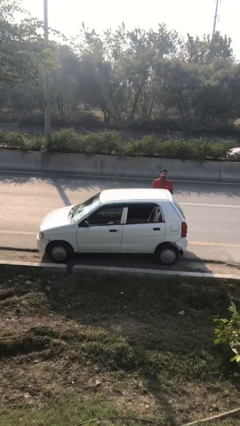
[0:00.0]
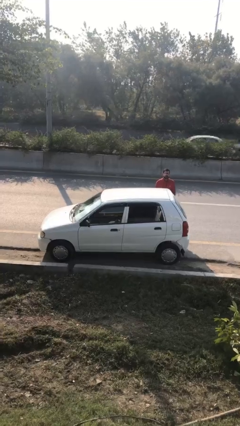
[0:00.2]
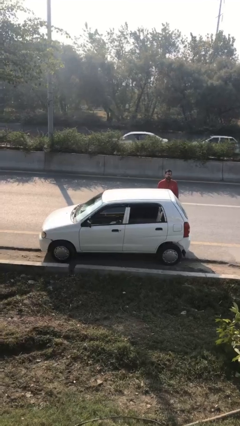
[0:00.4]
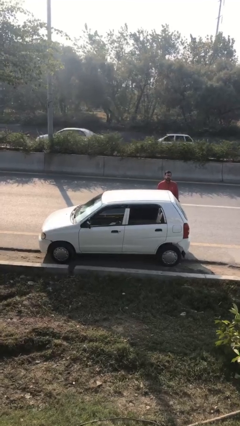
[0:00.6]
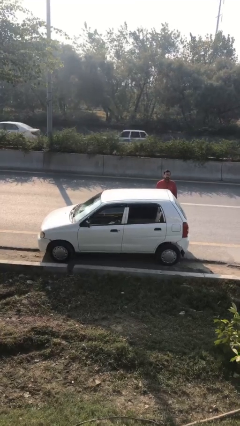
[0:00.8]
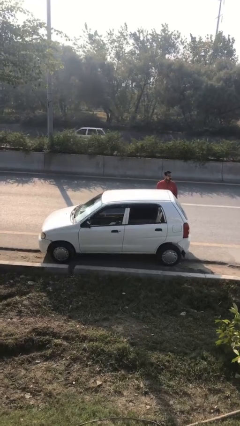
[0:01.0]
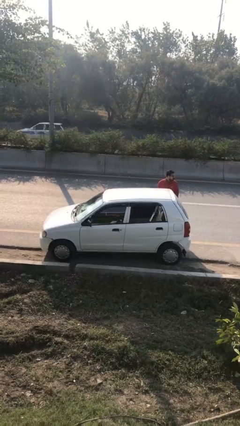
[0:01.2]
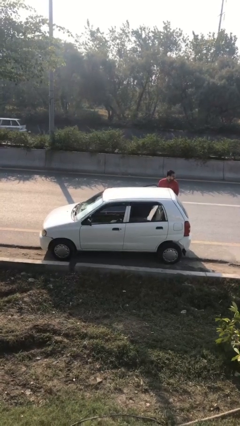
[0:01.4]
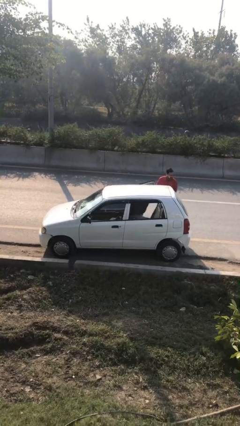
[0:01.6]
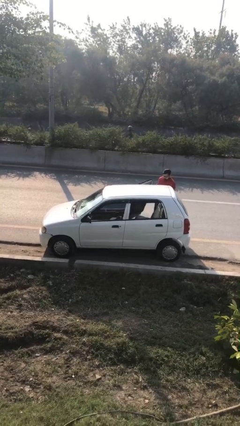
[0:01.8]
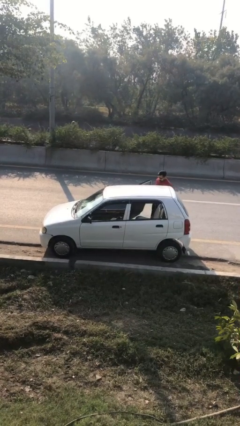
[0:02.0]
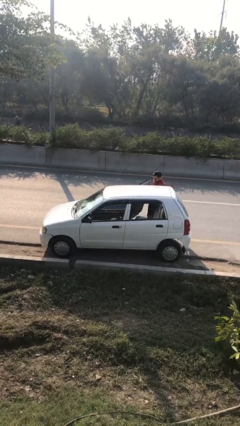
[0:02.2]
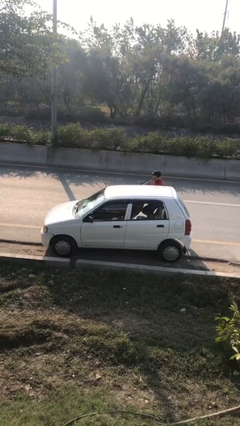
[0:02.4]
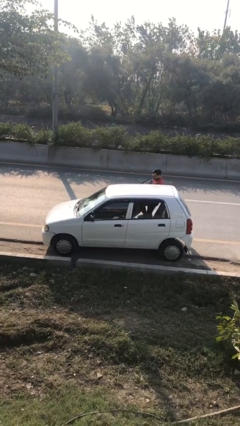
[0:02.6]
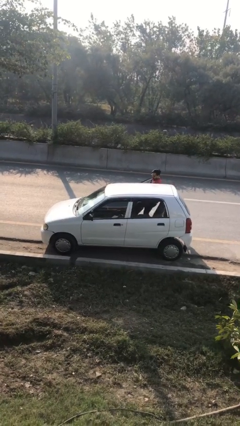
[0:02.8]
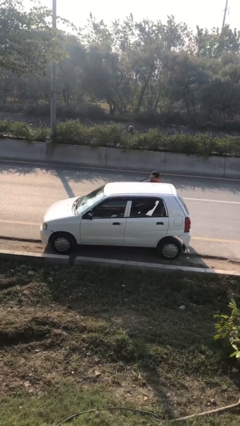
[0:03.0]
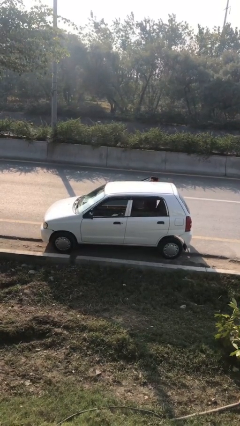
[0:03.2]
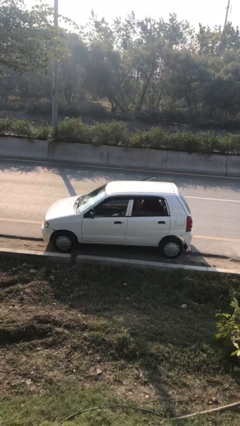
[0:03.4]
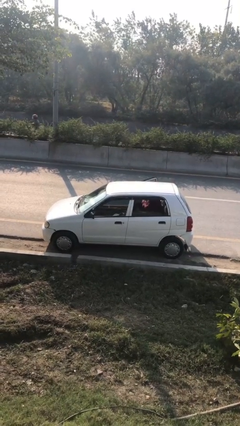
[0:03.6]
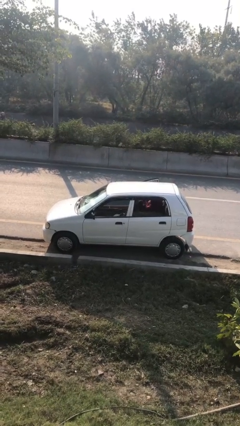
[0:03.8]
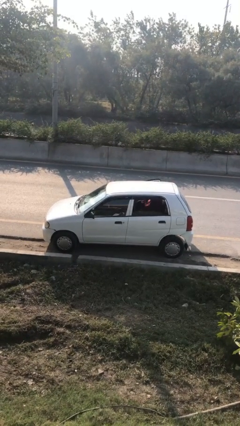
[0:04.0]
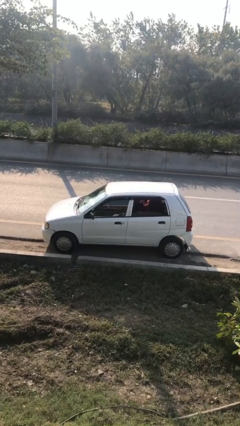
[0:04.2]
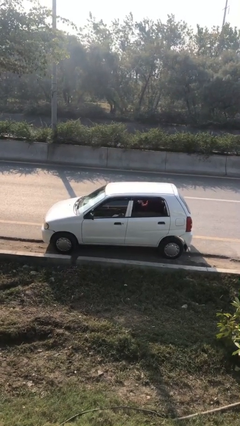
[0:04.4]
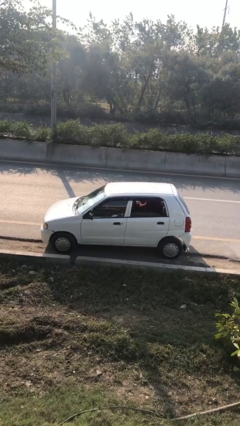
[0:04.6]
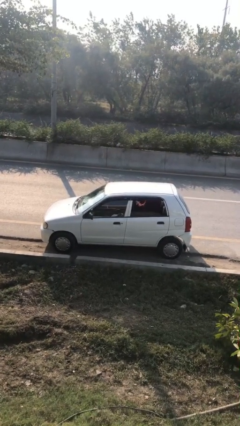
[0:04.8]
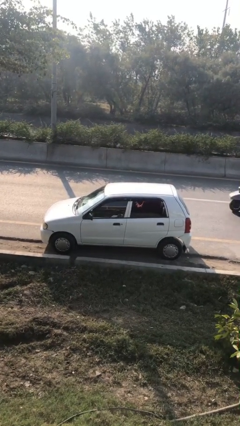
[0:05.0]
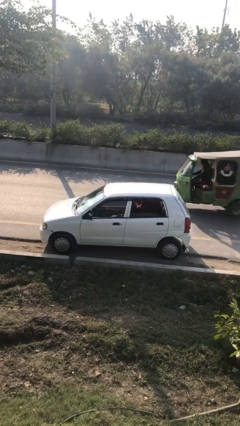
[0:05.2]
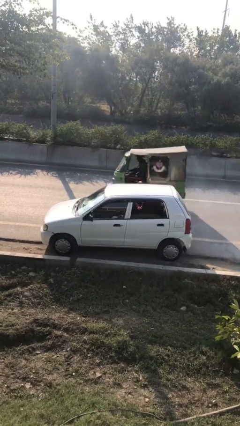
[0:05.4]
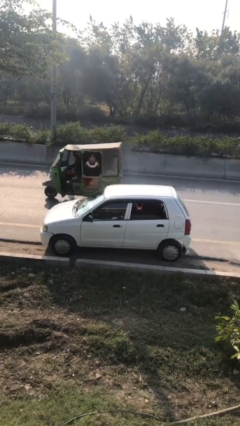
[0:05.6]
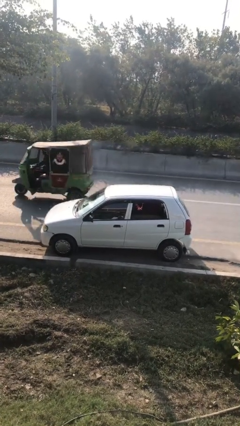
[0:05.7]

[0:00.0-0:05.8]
car picks up person

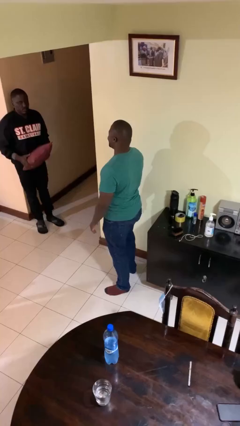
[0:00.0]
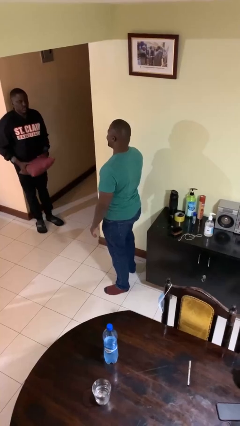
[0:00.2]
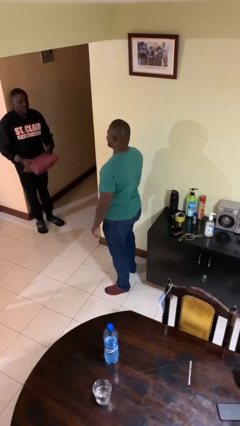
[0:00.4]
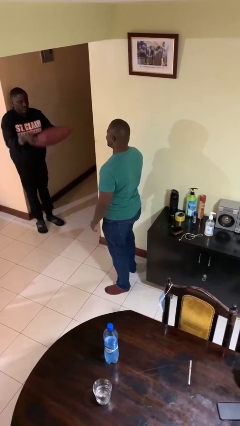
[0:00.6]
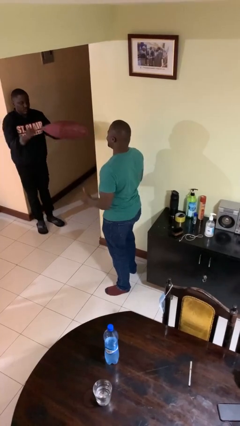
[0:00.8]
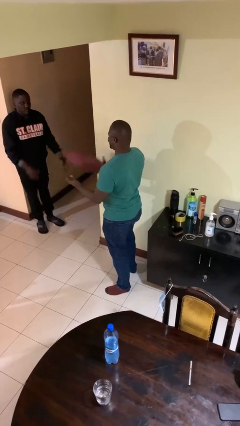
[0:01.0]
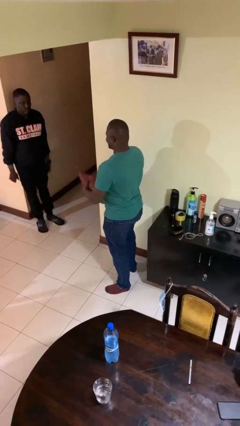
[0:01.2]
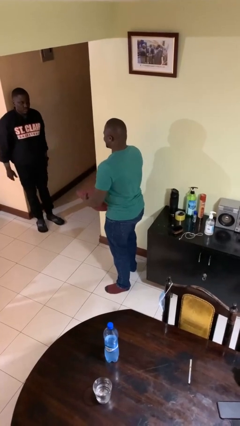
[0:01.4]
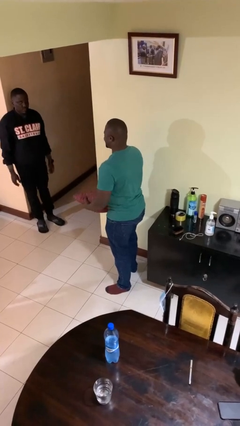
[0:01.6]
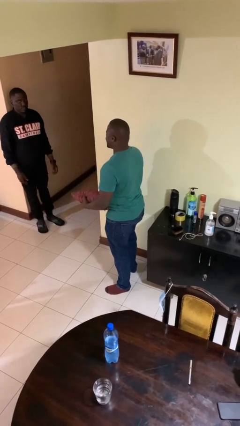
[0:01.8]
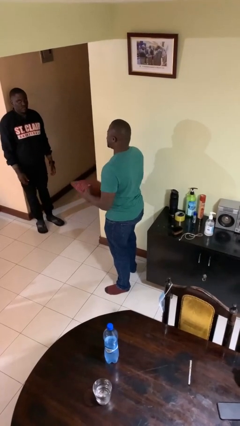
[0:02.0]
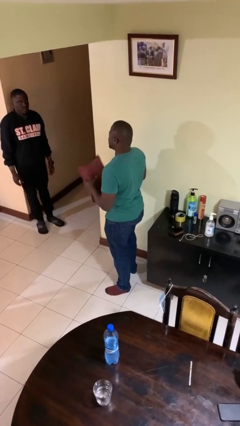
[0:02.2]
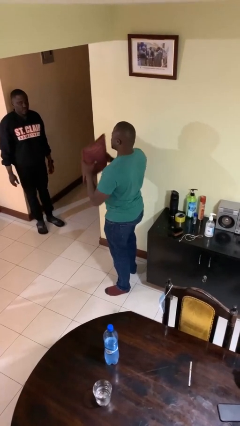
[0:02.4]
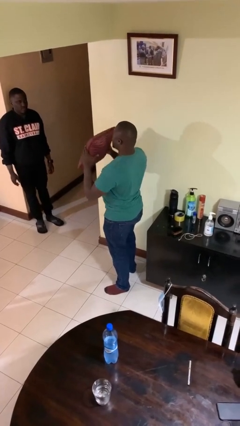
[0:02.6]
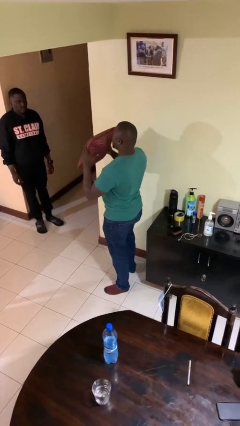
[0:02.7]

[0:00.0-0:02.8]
person catches object from person

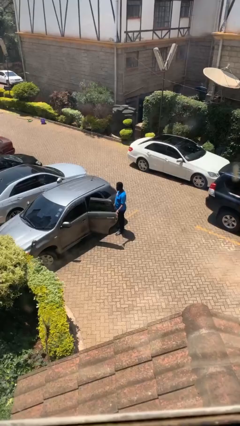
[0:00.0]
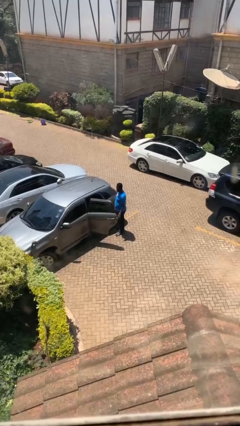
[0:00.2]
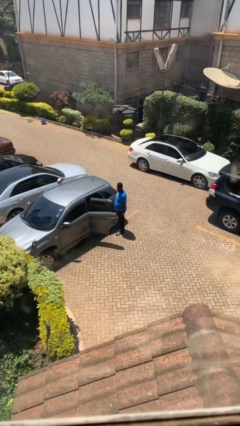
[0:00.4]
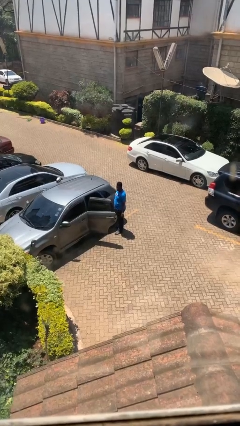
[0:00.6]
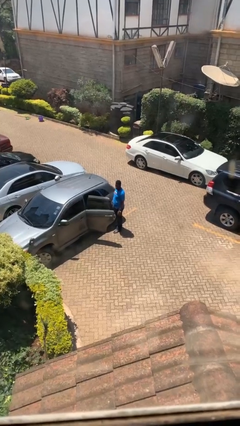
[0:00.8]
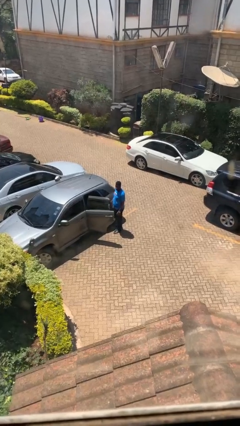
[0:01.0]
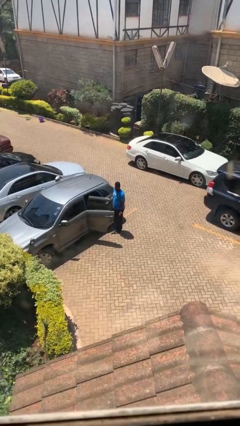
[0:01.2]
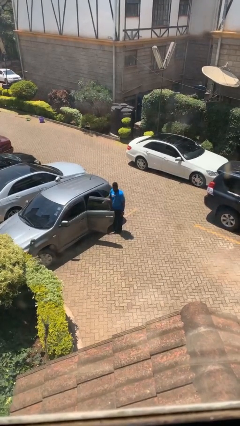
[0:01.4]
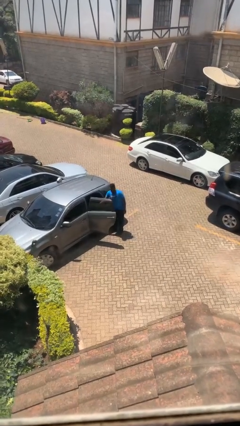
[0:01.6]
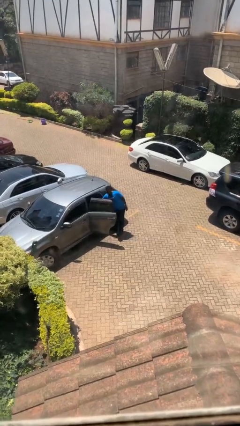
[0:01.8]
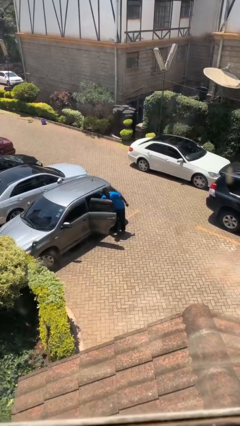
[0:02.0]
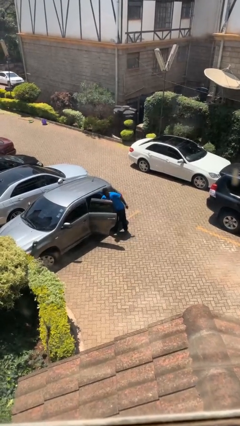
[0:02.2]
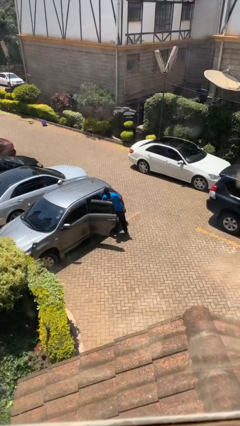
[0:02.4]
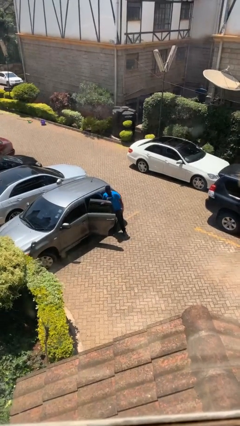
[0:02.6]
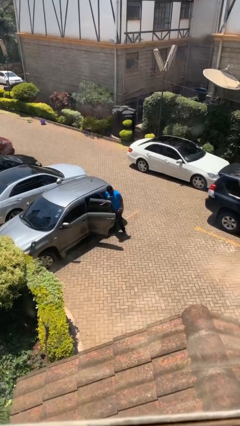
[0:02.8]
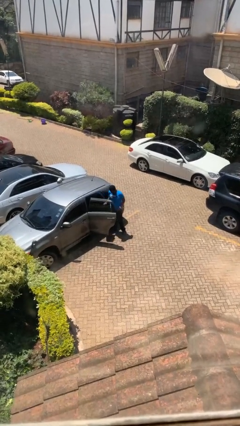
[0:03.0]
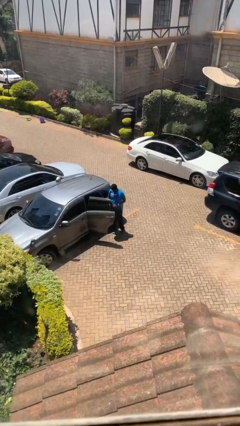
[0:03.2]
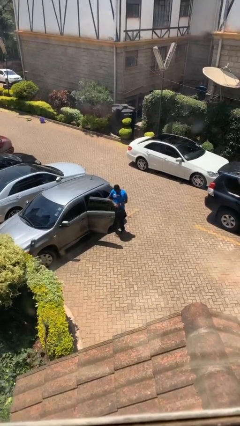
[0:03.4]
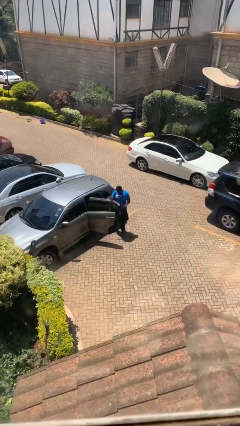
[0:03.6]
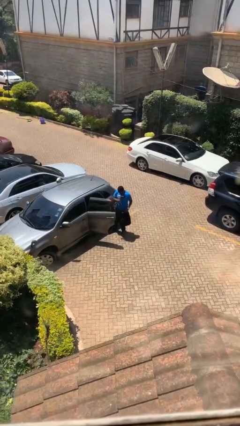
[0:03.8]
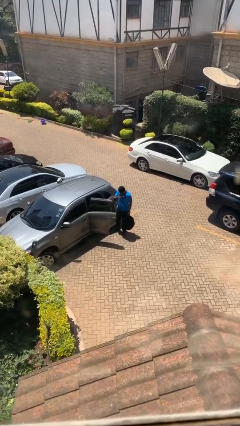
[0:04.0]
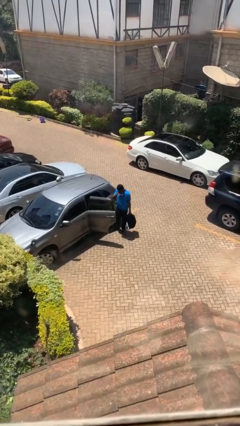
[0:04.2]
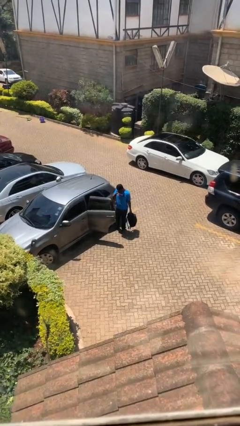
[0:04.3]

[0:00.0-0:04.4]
person unloads car

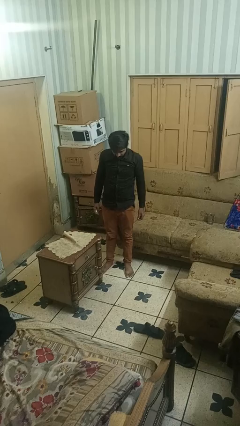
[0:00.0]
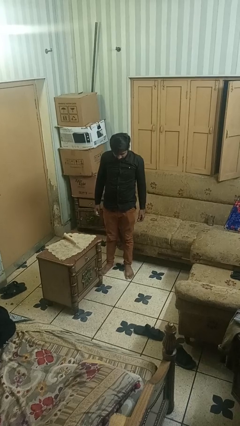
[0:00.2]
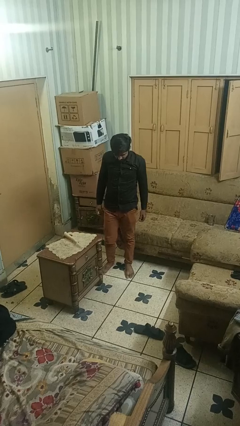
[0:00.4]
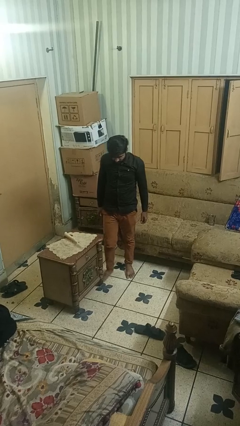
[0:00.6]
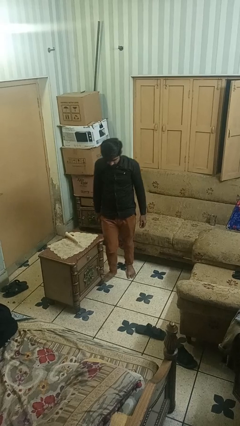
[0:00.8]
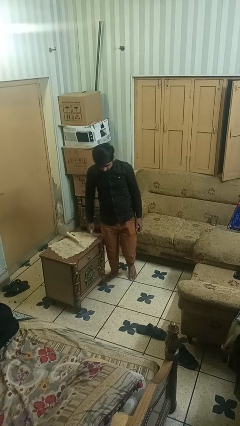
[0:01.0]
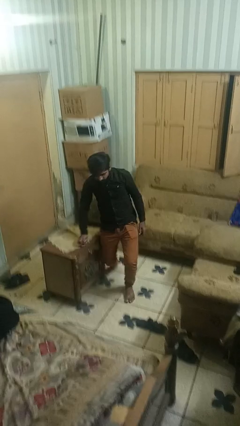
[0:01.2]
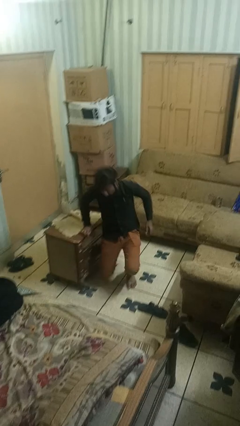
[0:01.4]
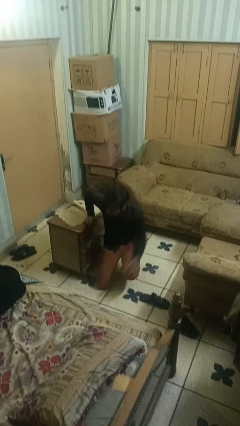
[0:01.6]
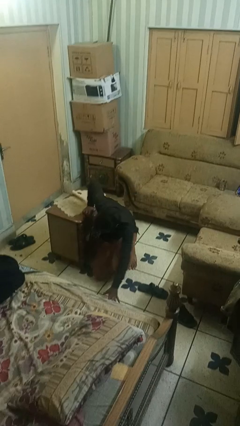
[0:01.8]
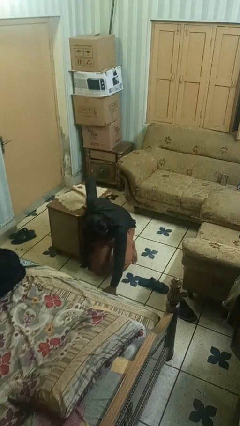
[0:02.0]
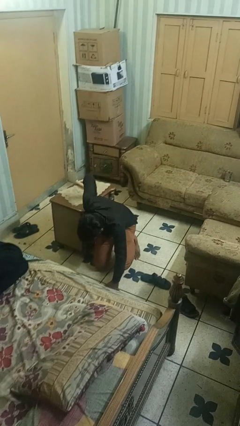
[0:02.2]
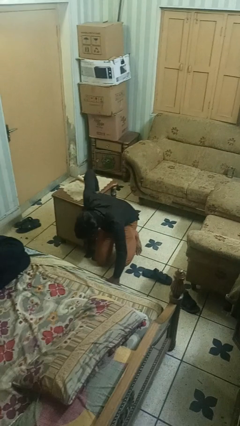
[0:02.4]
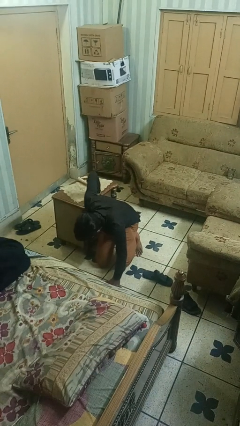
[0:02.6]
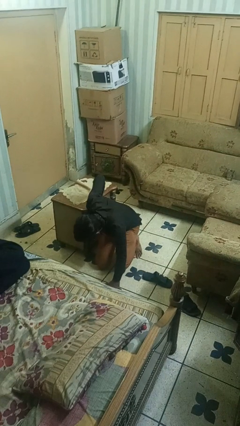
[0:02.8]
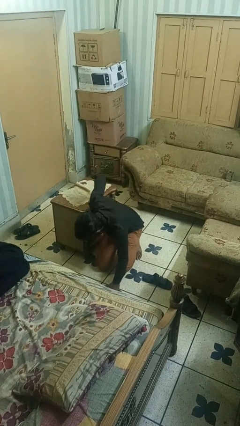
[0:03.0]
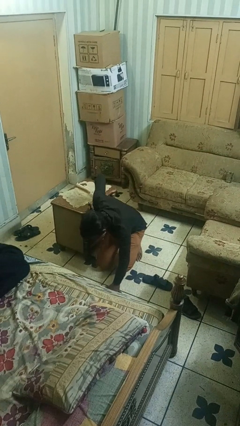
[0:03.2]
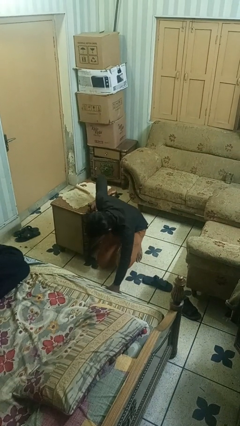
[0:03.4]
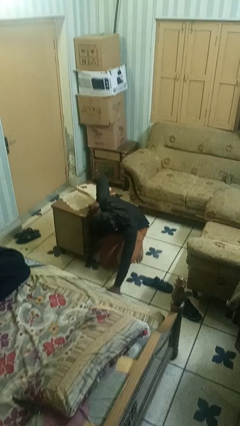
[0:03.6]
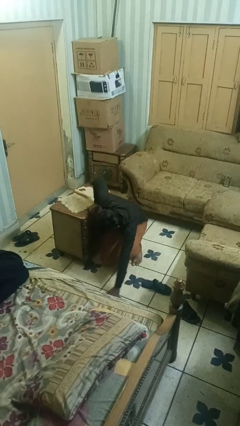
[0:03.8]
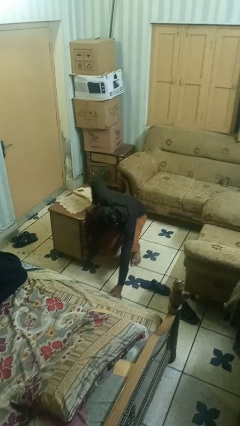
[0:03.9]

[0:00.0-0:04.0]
person bumps into table

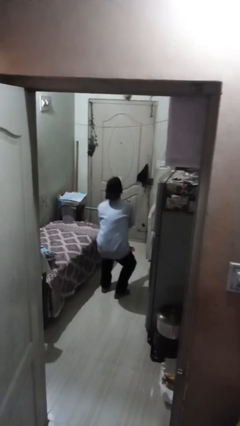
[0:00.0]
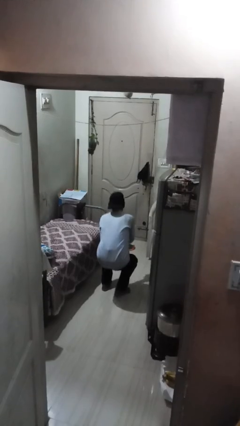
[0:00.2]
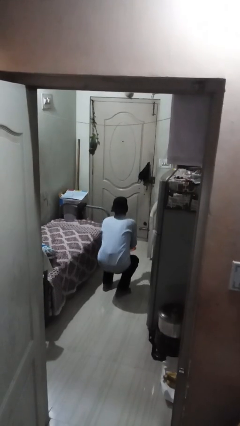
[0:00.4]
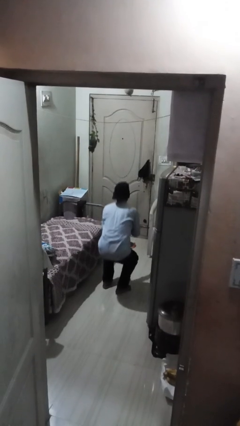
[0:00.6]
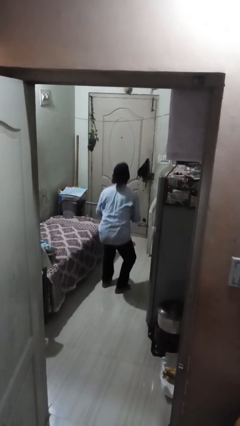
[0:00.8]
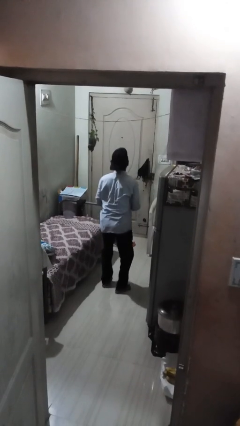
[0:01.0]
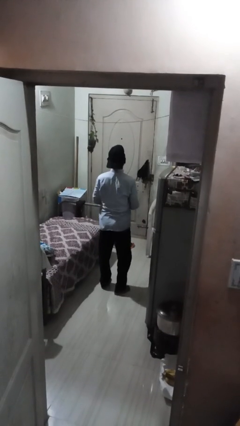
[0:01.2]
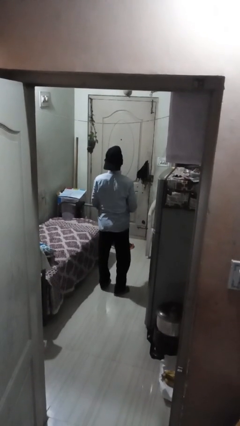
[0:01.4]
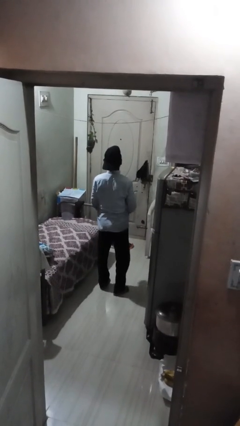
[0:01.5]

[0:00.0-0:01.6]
person catches dropped object
